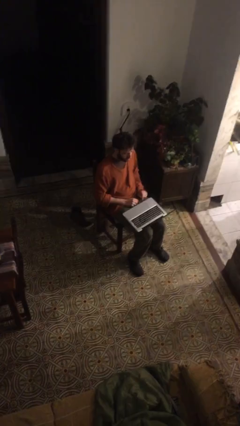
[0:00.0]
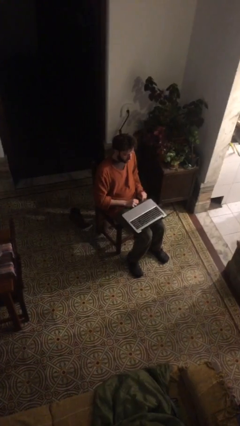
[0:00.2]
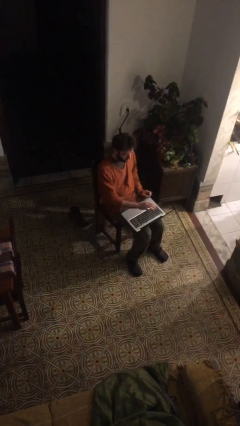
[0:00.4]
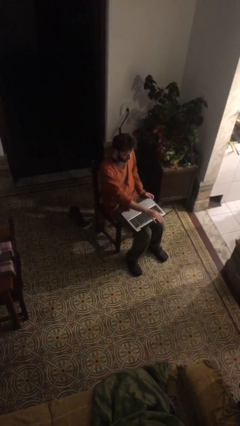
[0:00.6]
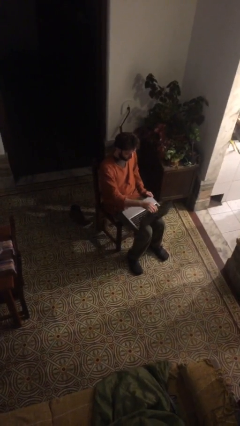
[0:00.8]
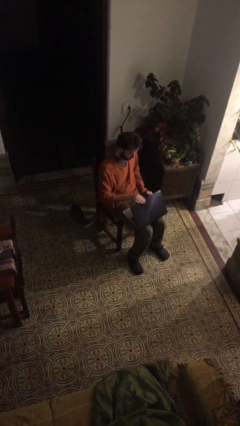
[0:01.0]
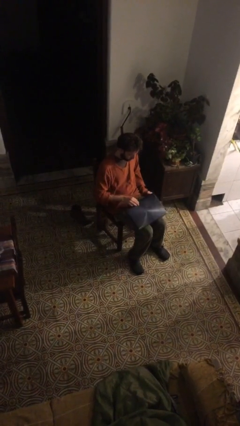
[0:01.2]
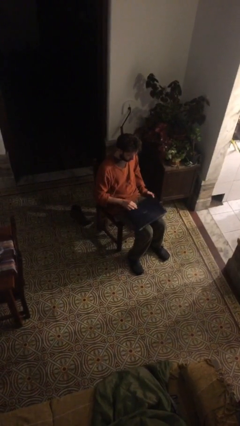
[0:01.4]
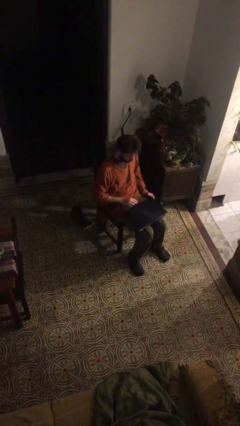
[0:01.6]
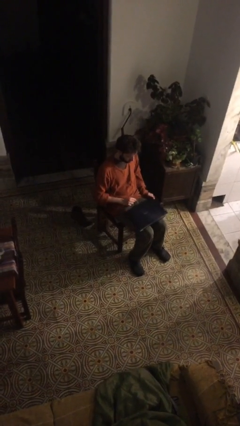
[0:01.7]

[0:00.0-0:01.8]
person closes laptop

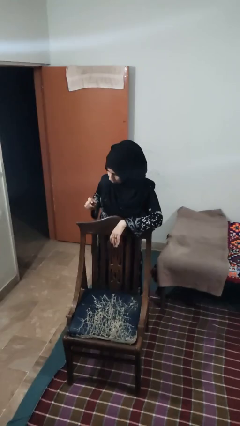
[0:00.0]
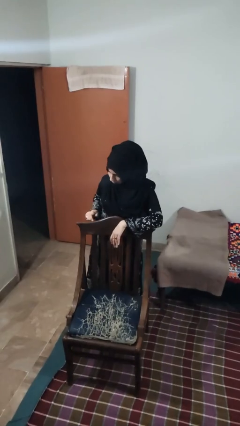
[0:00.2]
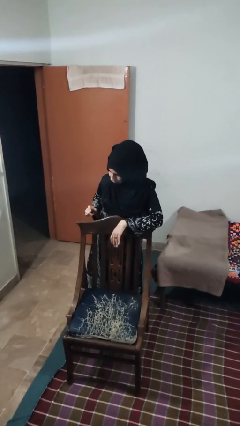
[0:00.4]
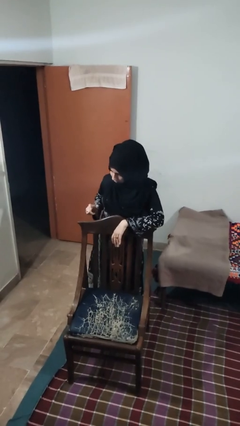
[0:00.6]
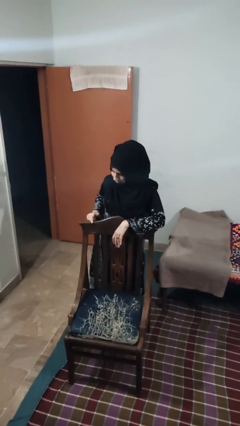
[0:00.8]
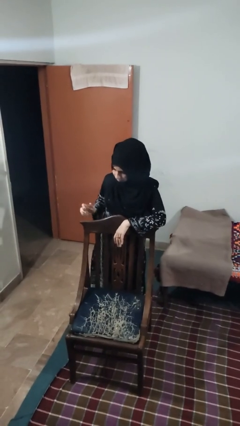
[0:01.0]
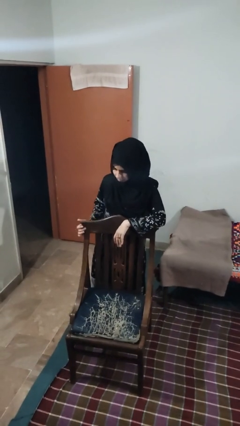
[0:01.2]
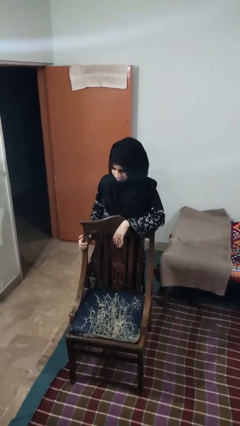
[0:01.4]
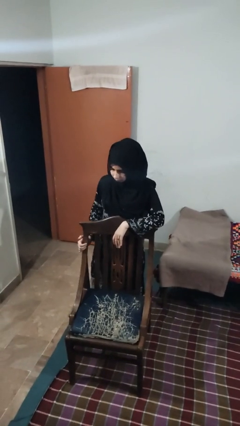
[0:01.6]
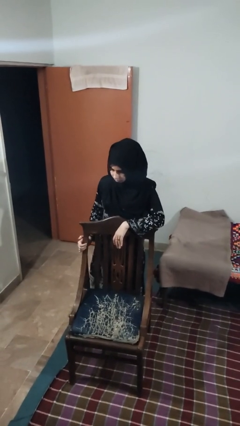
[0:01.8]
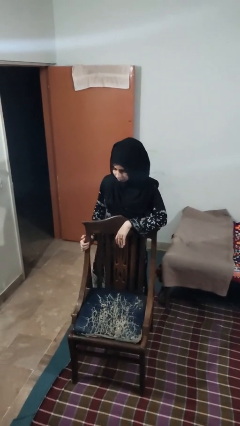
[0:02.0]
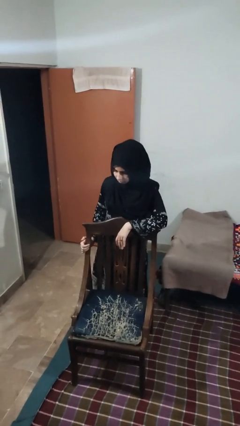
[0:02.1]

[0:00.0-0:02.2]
person taps object with finger

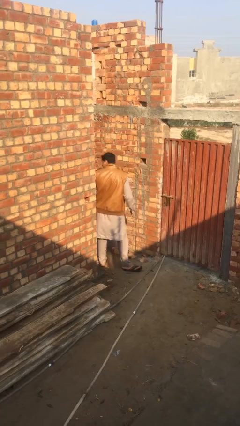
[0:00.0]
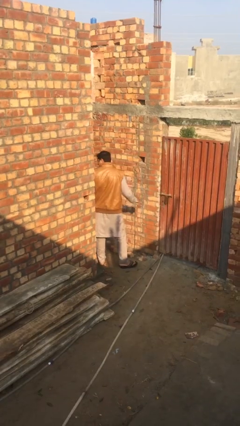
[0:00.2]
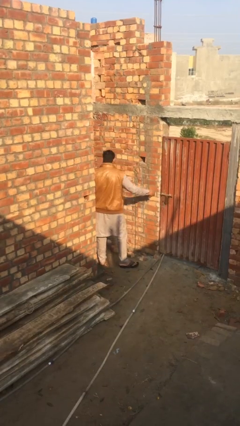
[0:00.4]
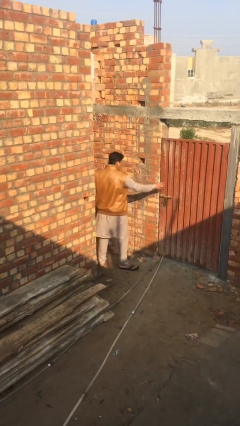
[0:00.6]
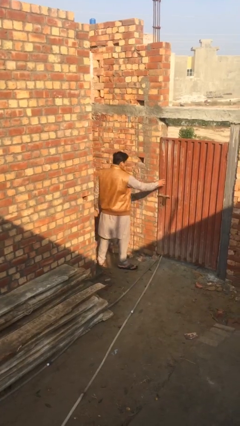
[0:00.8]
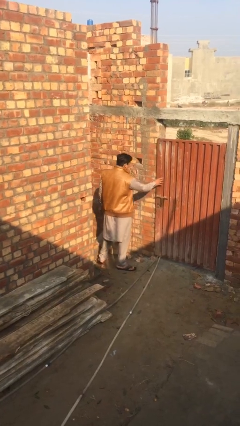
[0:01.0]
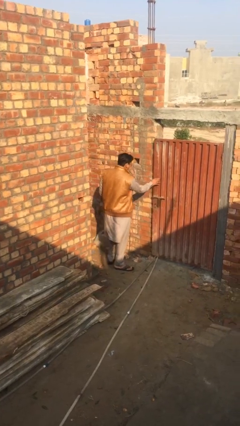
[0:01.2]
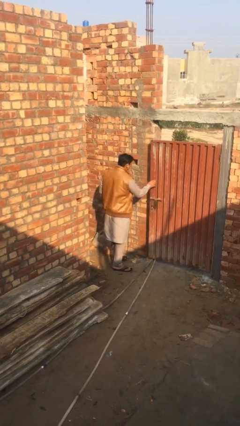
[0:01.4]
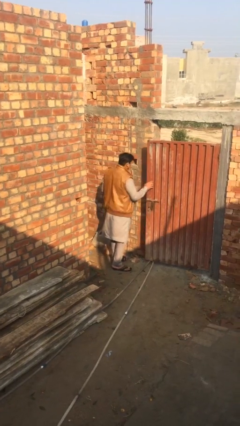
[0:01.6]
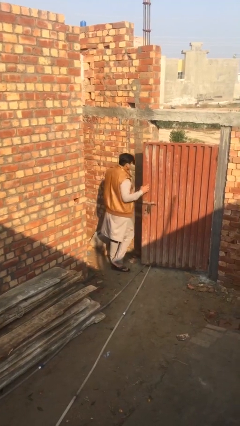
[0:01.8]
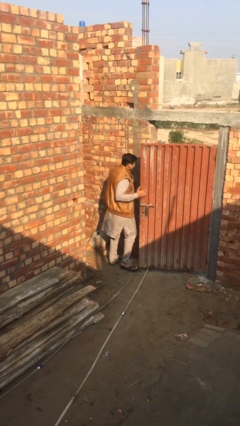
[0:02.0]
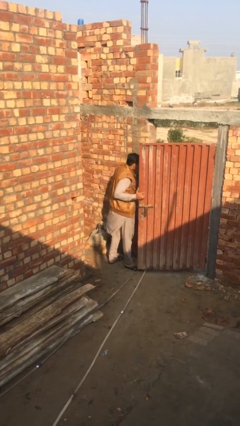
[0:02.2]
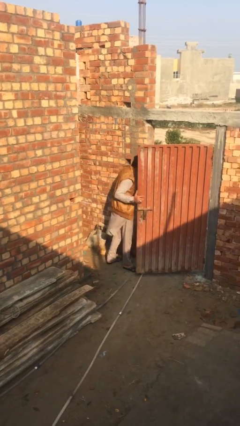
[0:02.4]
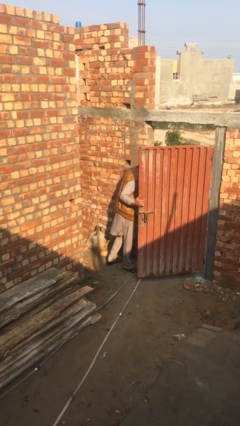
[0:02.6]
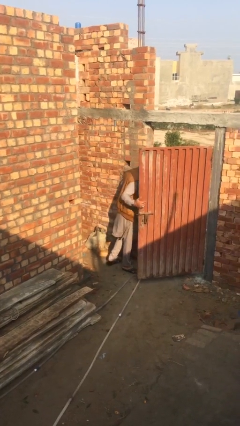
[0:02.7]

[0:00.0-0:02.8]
person opens facility door

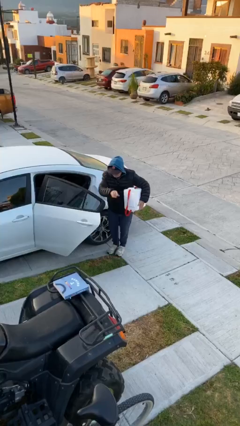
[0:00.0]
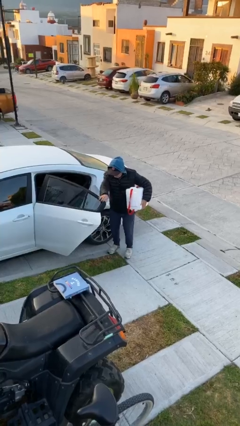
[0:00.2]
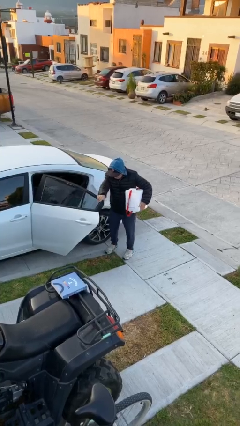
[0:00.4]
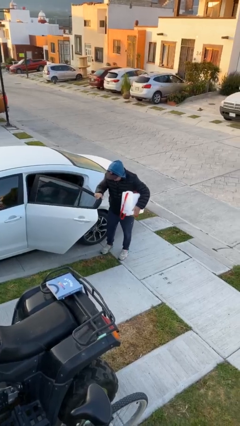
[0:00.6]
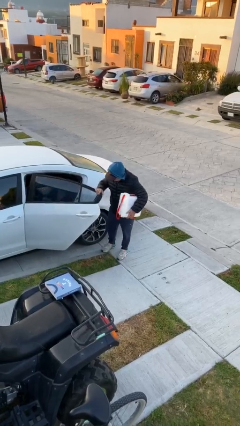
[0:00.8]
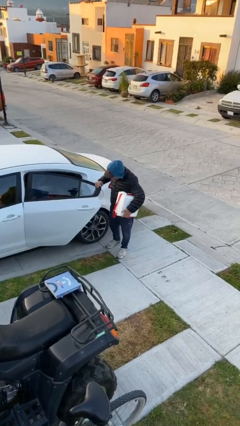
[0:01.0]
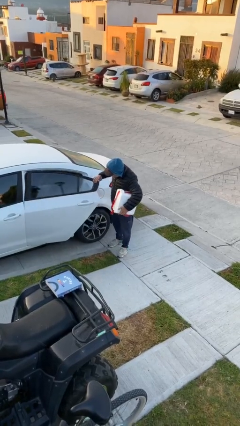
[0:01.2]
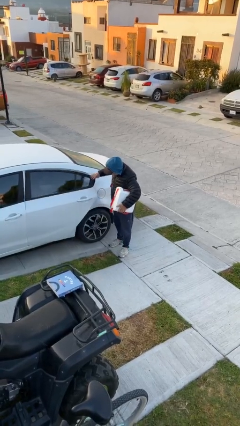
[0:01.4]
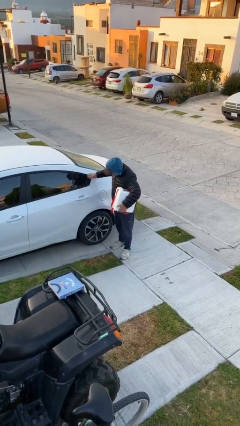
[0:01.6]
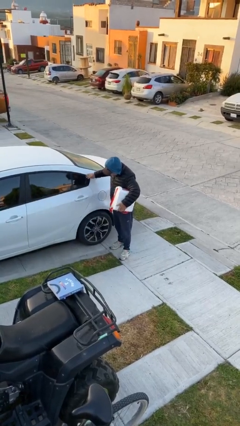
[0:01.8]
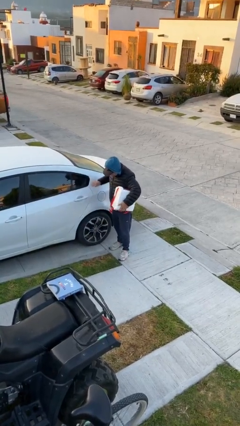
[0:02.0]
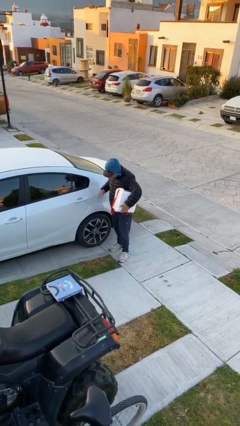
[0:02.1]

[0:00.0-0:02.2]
person closes car door

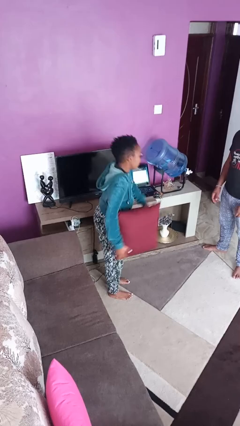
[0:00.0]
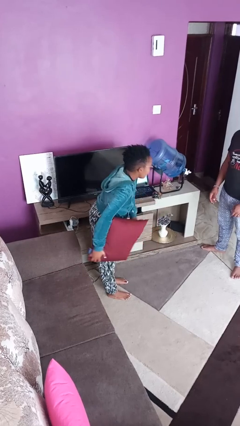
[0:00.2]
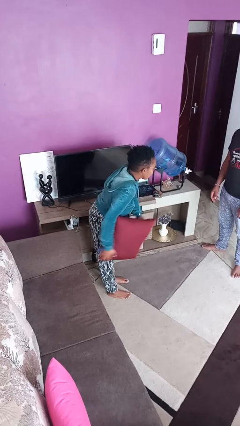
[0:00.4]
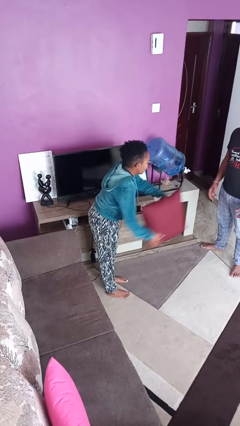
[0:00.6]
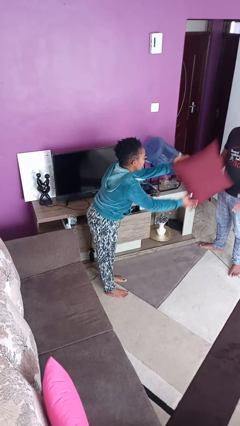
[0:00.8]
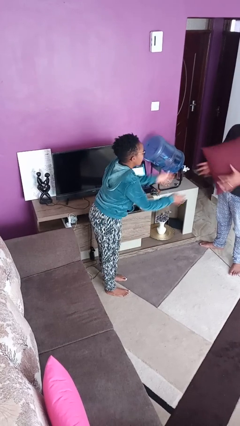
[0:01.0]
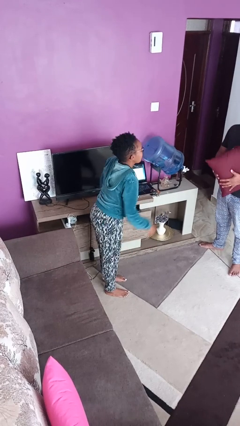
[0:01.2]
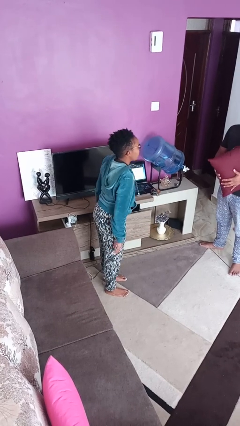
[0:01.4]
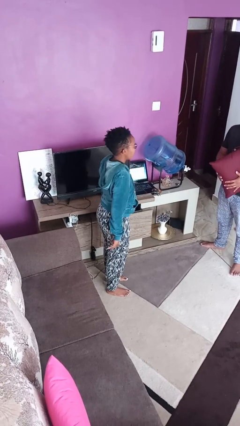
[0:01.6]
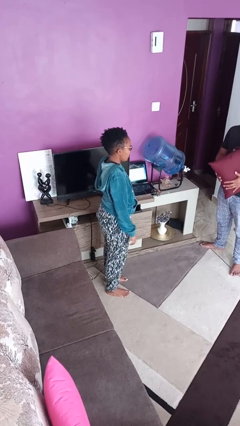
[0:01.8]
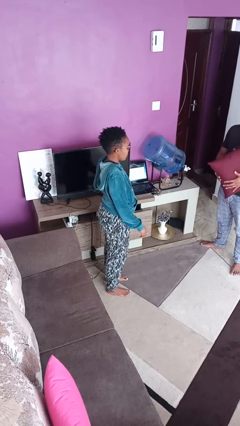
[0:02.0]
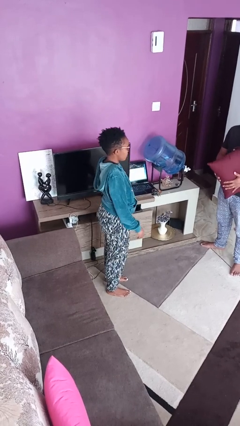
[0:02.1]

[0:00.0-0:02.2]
person throws object to person

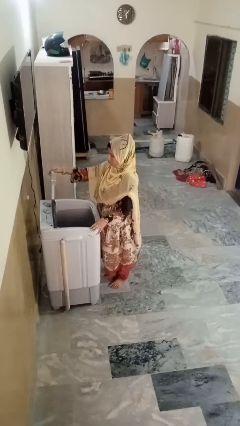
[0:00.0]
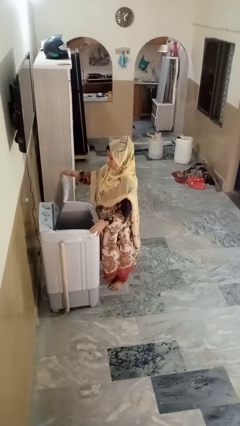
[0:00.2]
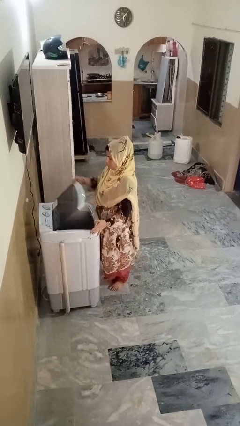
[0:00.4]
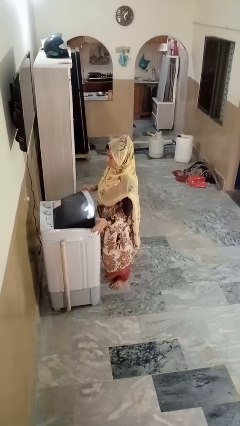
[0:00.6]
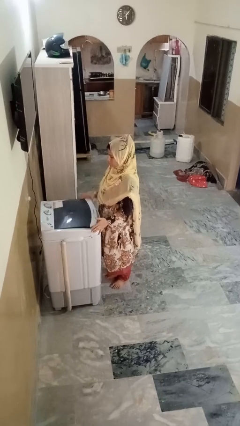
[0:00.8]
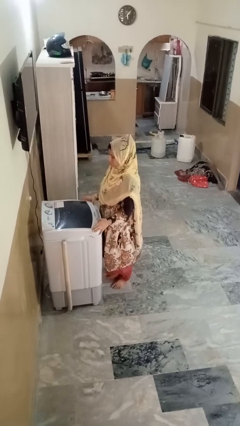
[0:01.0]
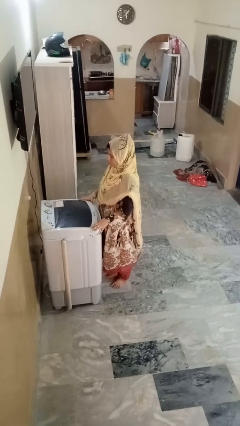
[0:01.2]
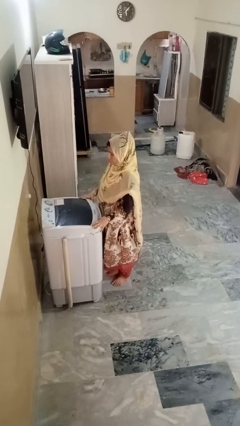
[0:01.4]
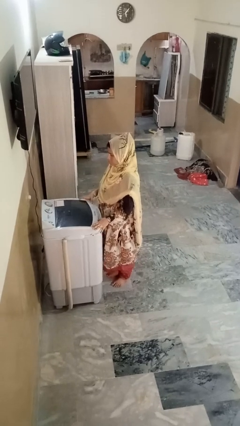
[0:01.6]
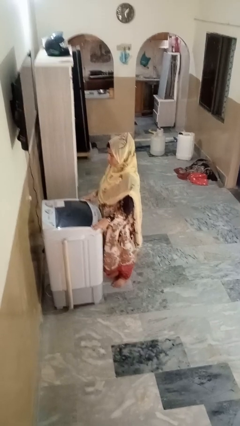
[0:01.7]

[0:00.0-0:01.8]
person closes clothes washer

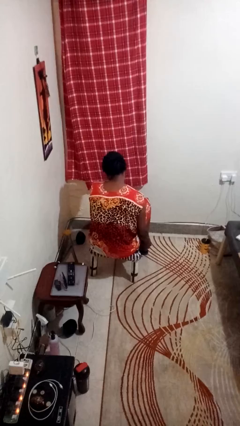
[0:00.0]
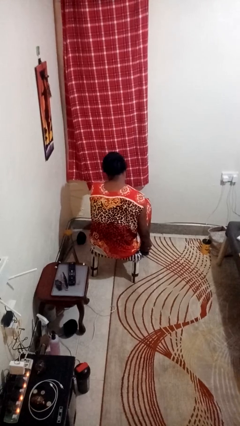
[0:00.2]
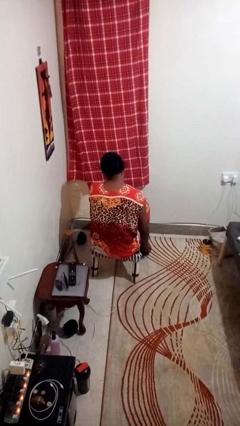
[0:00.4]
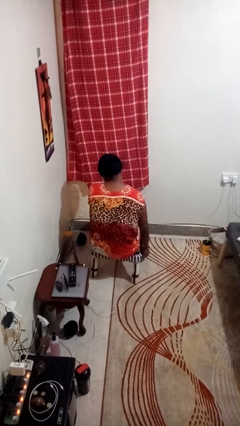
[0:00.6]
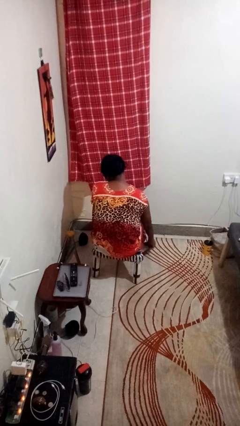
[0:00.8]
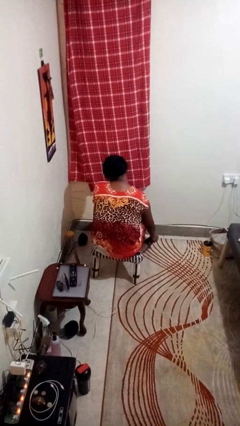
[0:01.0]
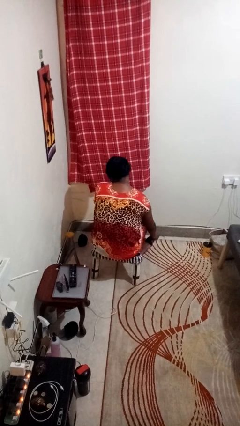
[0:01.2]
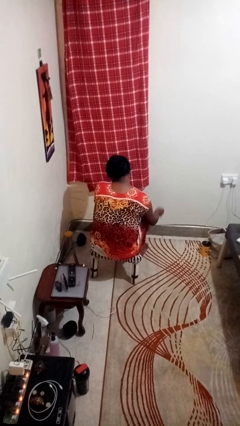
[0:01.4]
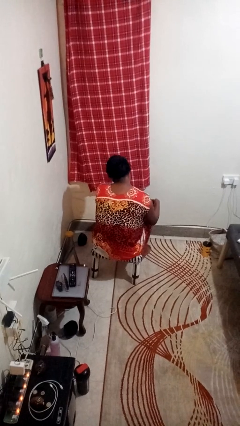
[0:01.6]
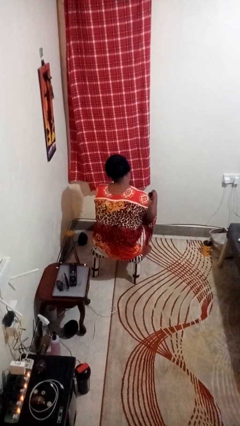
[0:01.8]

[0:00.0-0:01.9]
person takes off socks

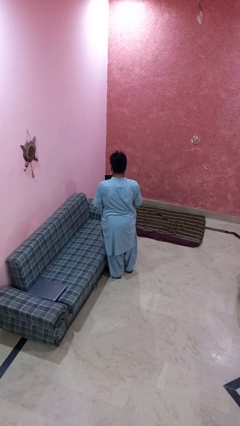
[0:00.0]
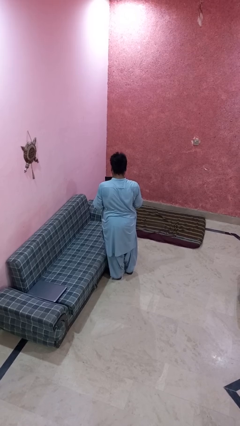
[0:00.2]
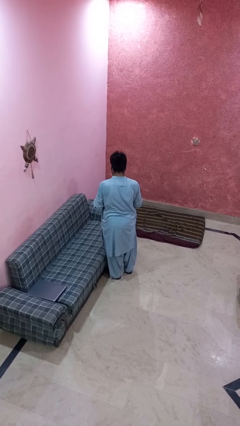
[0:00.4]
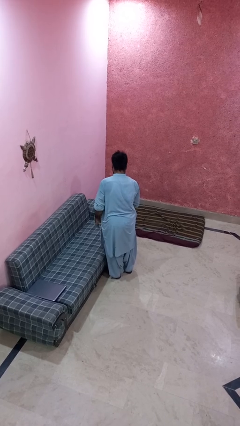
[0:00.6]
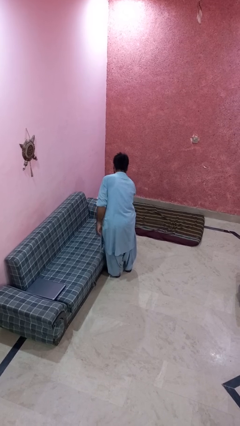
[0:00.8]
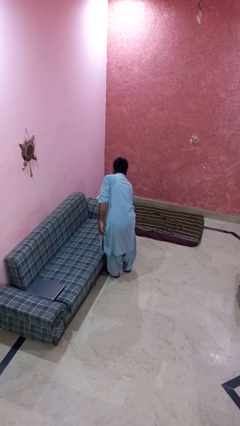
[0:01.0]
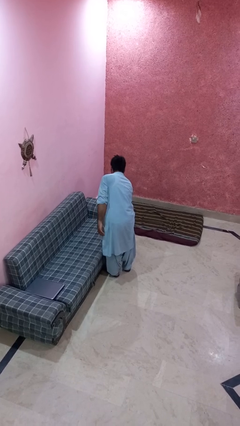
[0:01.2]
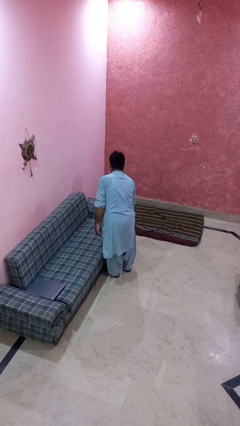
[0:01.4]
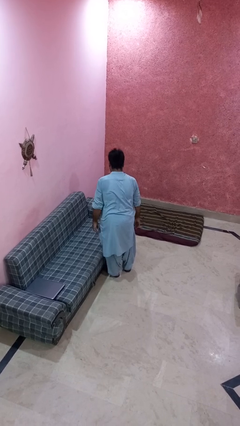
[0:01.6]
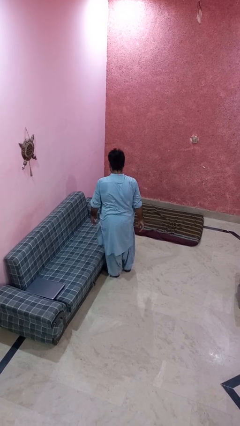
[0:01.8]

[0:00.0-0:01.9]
person puts down object on couch
